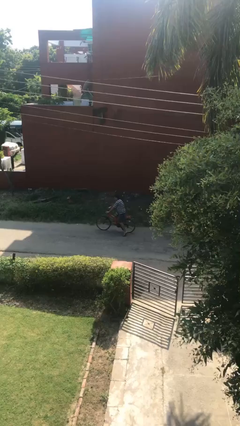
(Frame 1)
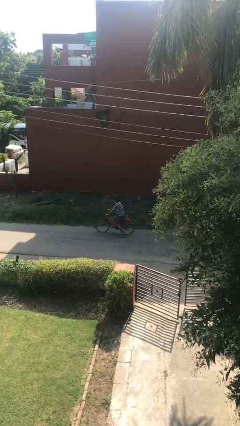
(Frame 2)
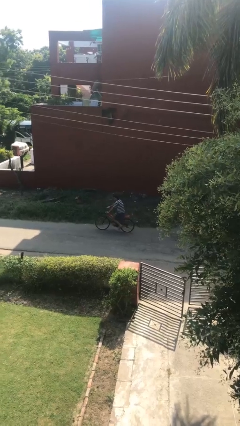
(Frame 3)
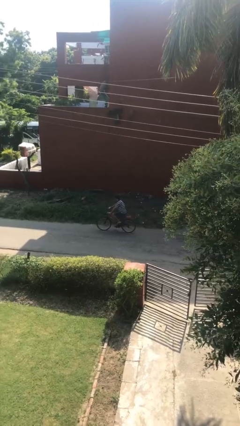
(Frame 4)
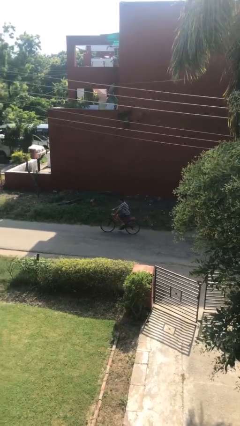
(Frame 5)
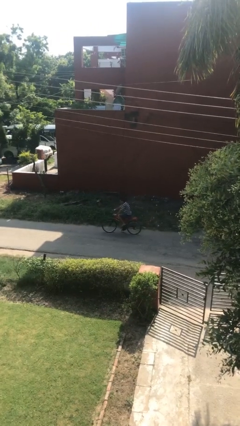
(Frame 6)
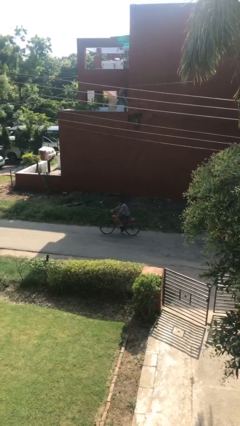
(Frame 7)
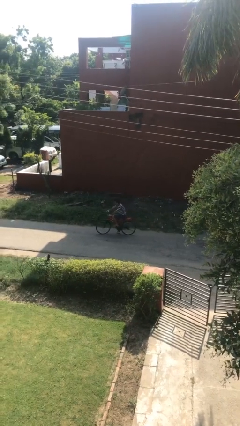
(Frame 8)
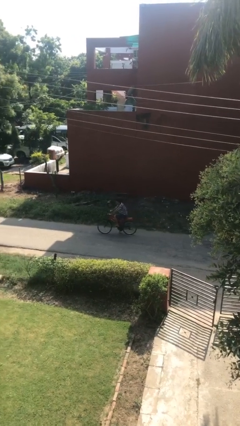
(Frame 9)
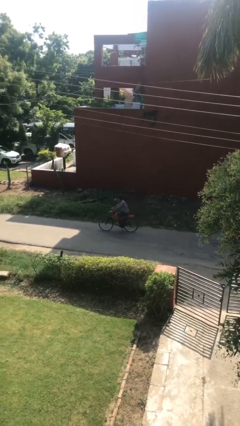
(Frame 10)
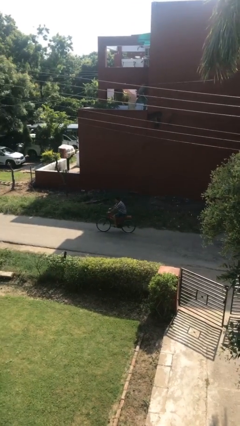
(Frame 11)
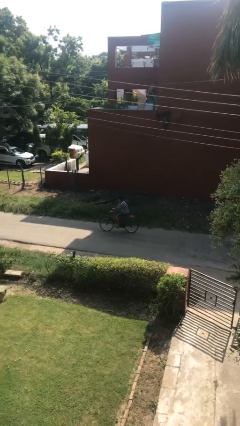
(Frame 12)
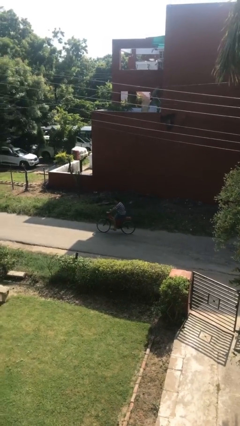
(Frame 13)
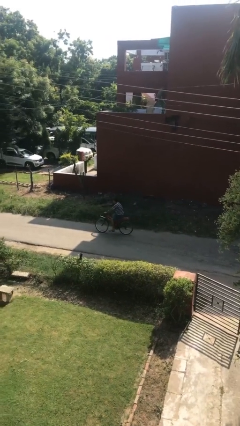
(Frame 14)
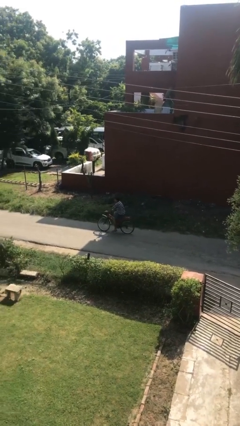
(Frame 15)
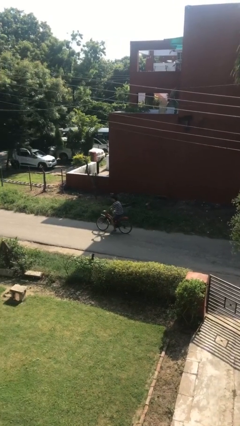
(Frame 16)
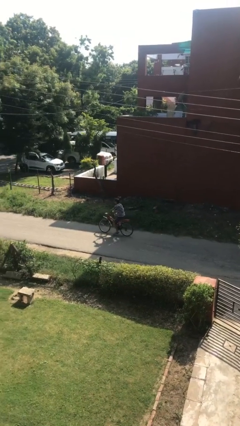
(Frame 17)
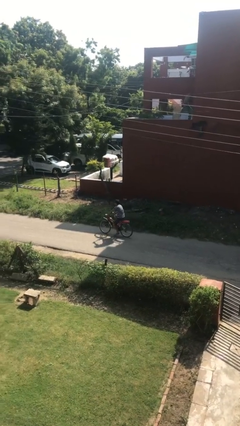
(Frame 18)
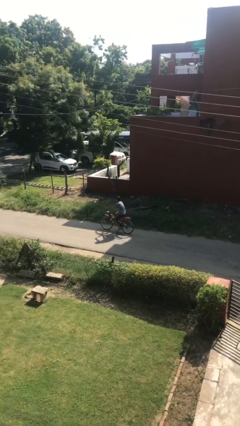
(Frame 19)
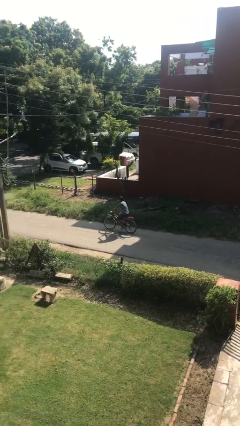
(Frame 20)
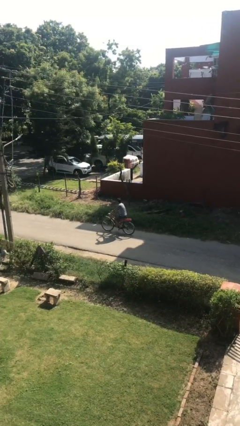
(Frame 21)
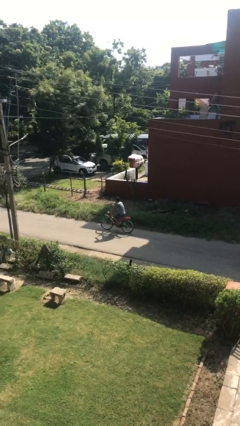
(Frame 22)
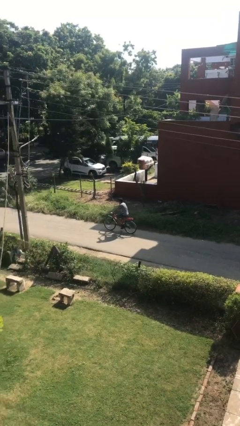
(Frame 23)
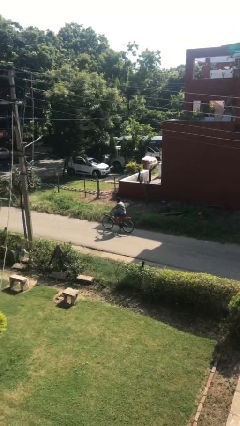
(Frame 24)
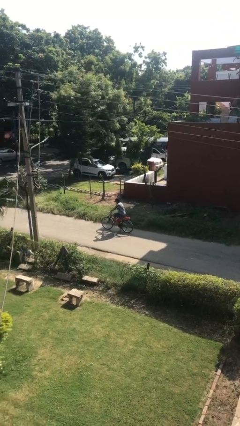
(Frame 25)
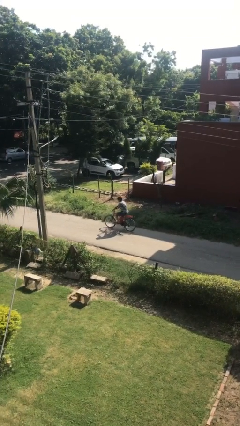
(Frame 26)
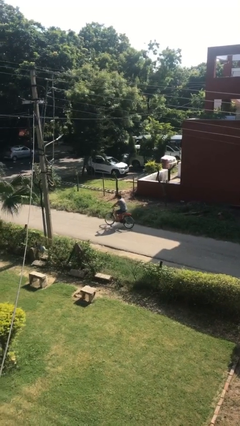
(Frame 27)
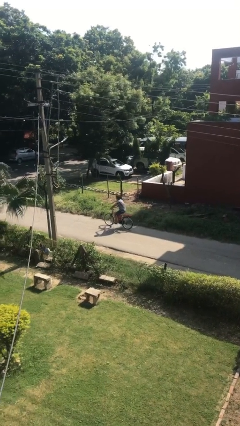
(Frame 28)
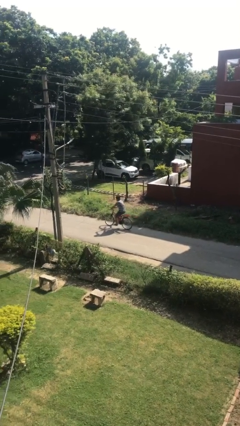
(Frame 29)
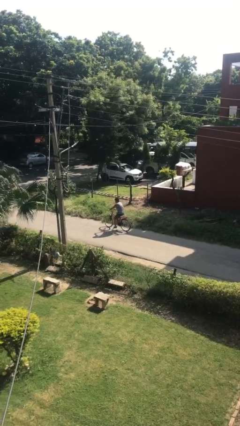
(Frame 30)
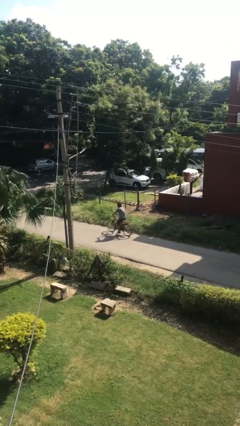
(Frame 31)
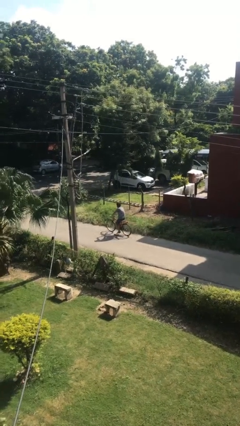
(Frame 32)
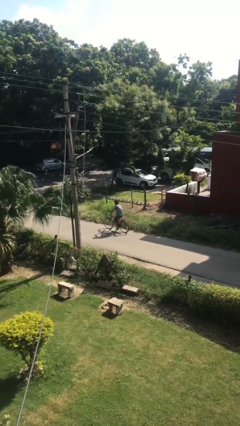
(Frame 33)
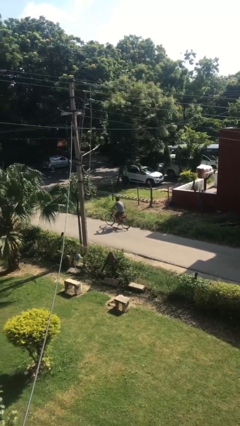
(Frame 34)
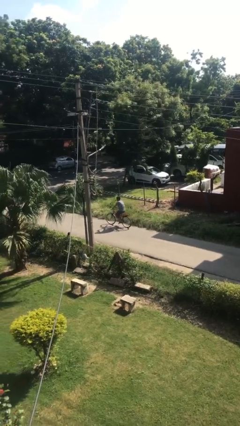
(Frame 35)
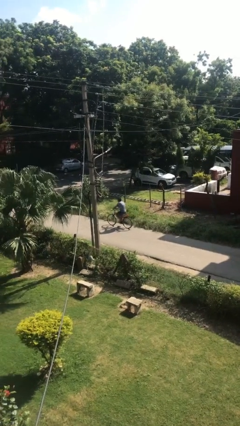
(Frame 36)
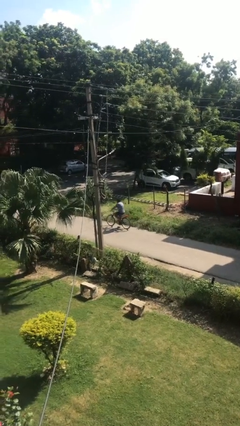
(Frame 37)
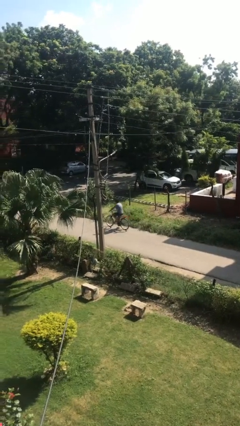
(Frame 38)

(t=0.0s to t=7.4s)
person rides bicycle

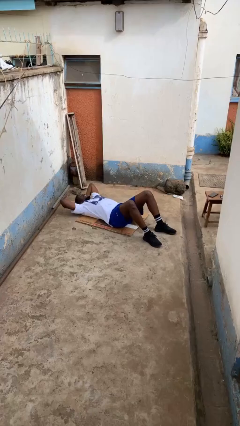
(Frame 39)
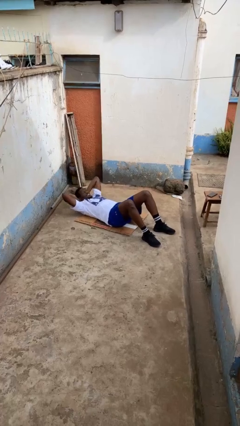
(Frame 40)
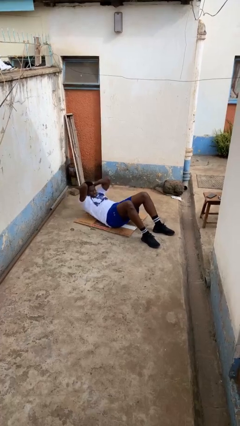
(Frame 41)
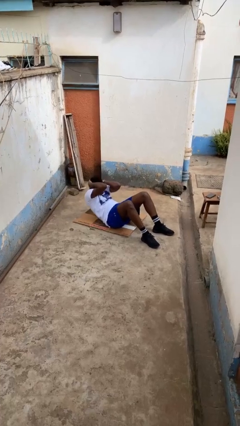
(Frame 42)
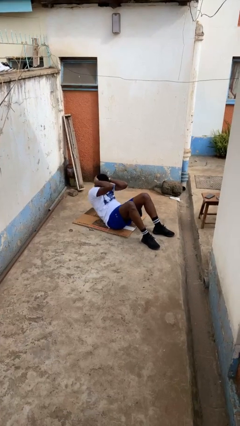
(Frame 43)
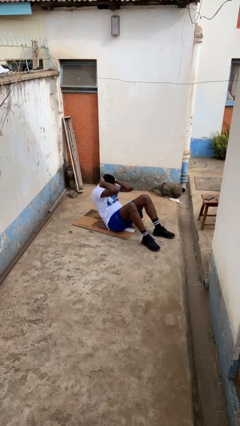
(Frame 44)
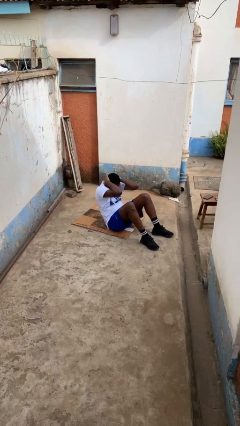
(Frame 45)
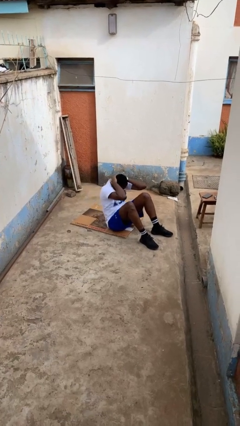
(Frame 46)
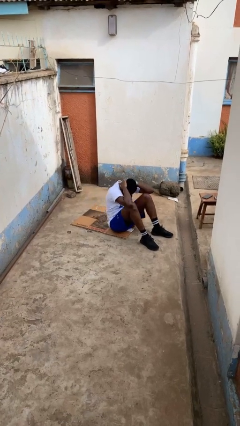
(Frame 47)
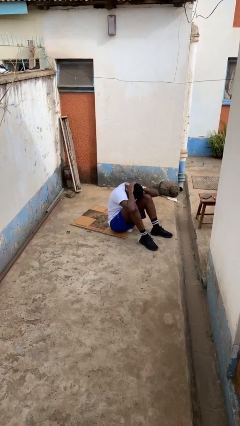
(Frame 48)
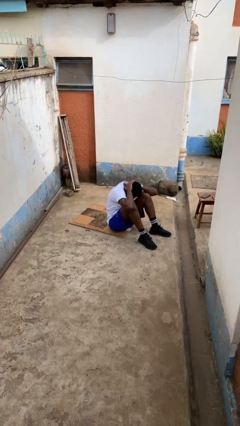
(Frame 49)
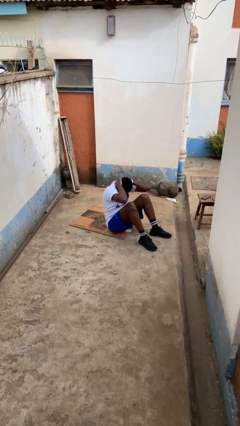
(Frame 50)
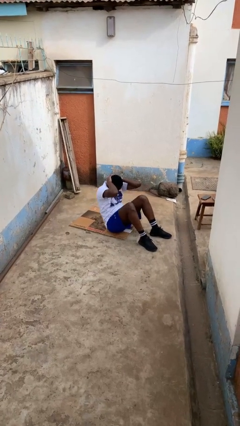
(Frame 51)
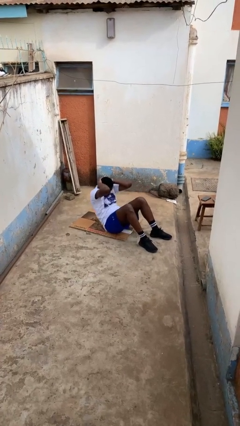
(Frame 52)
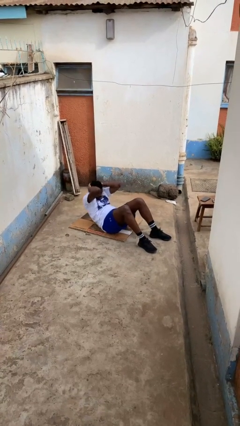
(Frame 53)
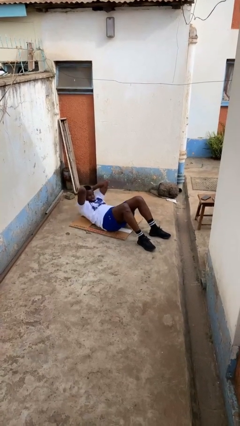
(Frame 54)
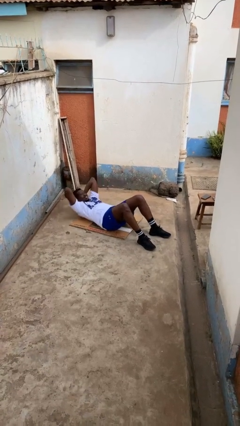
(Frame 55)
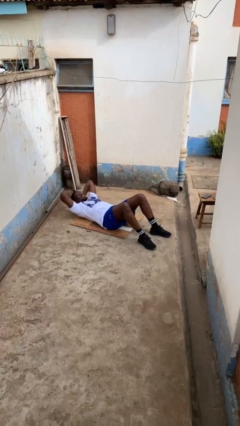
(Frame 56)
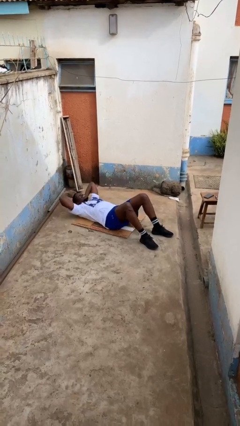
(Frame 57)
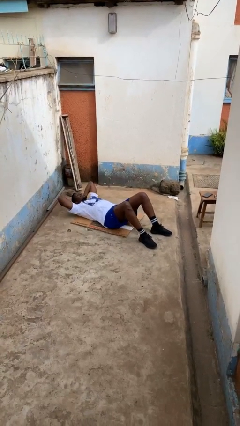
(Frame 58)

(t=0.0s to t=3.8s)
person exercises with situp

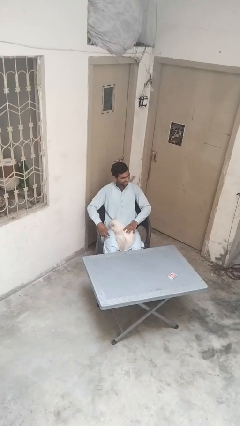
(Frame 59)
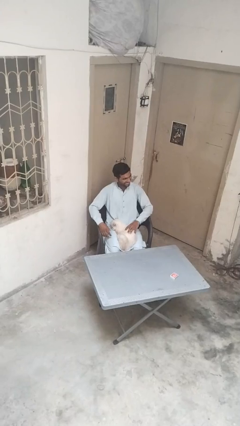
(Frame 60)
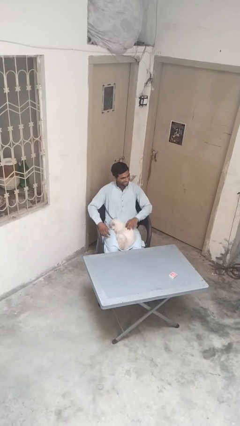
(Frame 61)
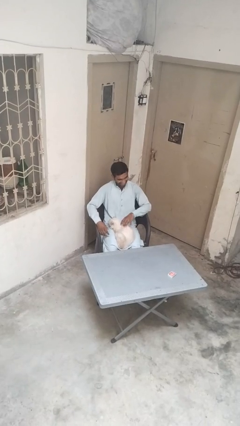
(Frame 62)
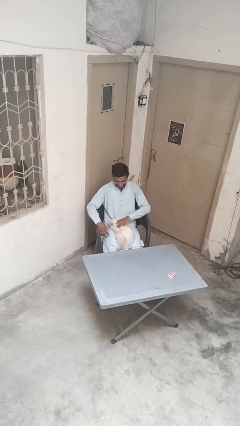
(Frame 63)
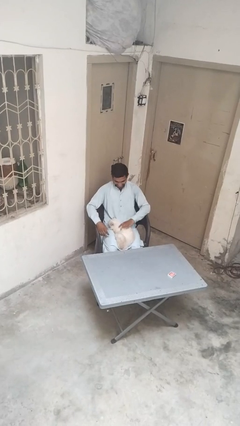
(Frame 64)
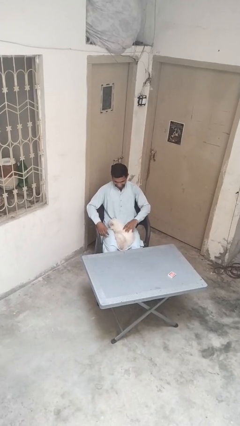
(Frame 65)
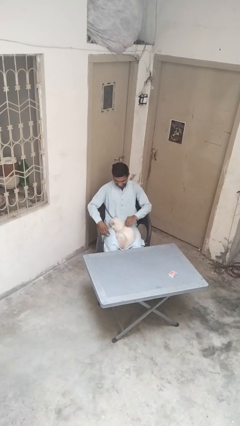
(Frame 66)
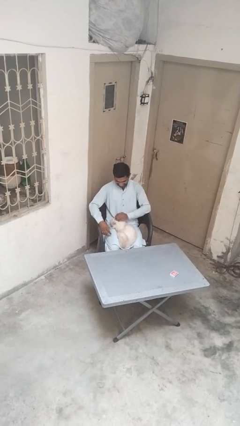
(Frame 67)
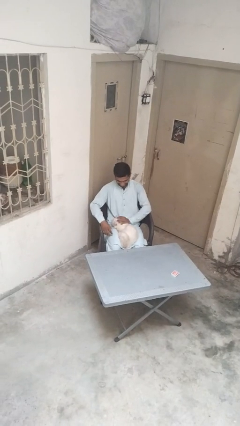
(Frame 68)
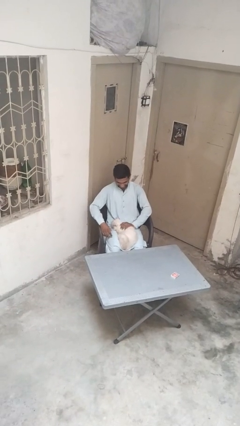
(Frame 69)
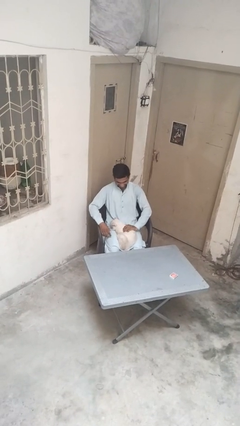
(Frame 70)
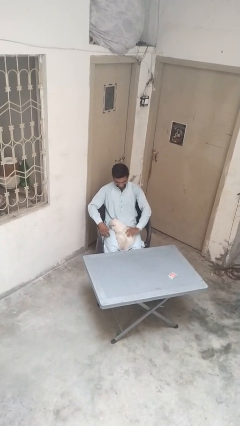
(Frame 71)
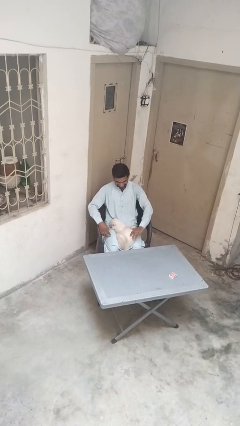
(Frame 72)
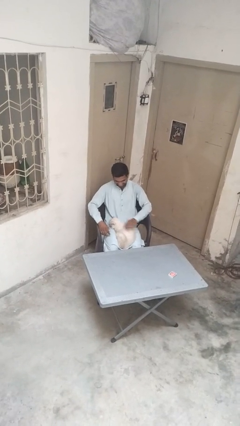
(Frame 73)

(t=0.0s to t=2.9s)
person pets cat

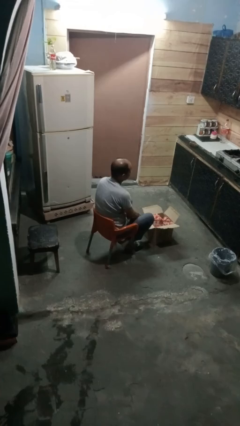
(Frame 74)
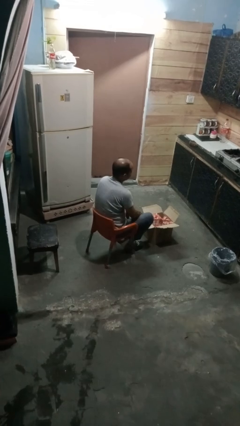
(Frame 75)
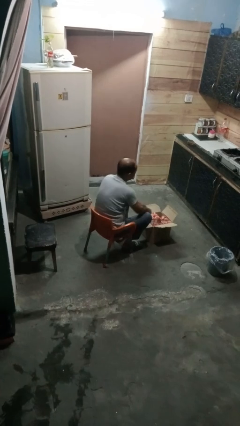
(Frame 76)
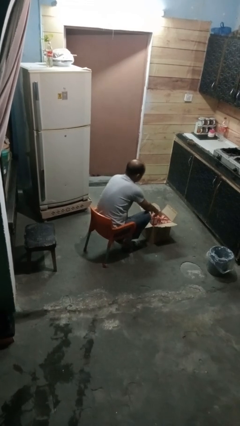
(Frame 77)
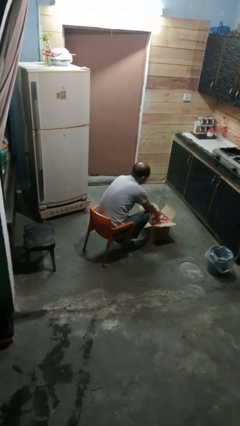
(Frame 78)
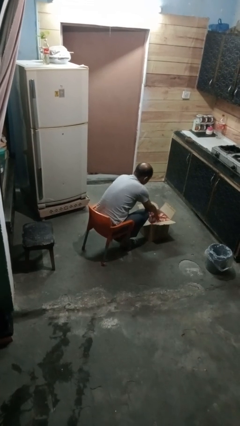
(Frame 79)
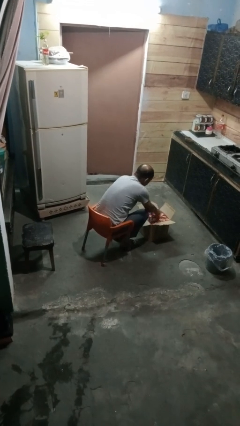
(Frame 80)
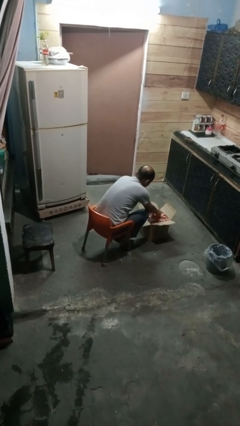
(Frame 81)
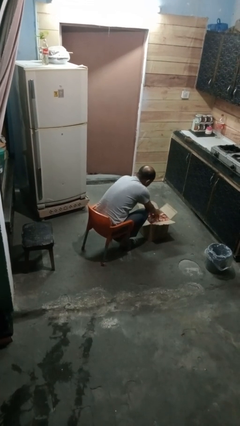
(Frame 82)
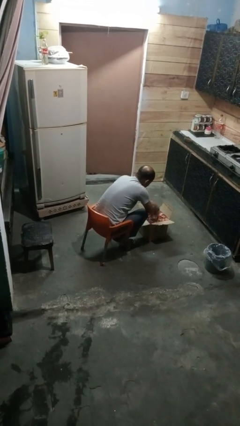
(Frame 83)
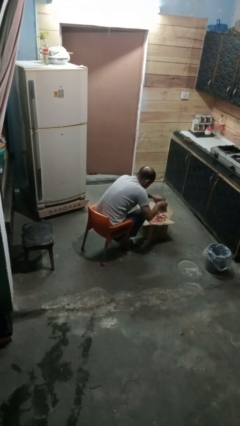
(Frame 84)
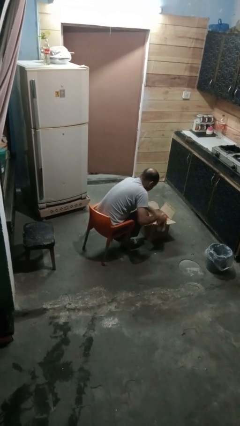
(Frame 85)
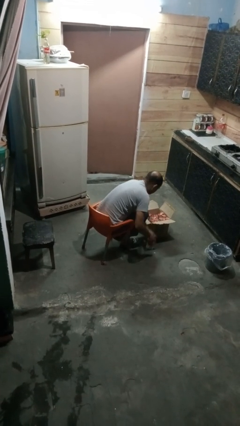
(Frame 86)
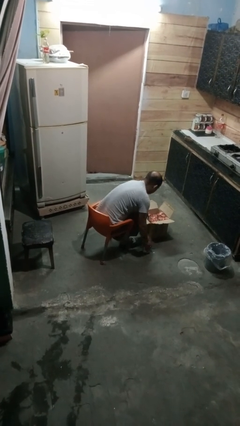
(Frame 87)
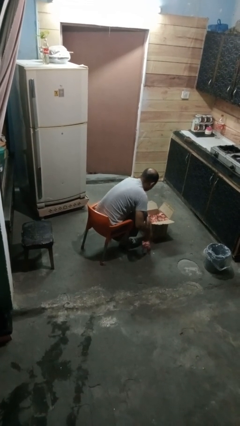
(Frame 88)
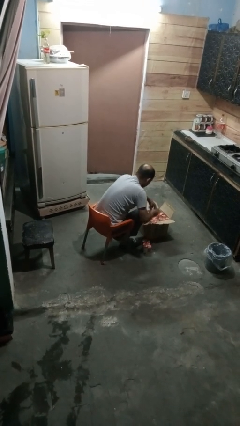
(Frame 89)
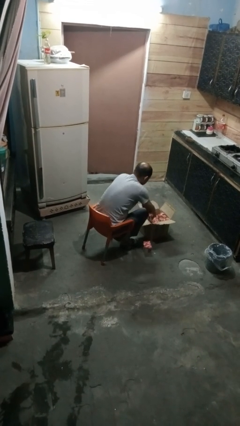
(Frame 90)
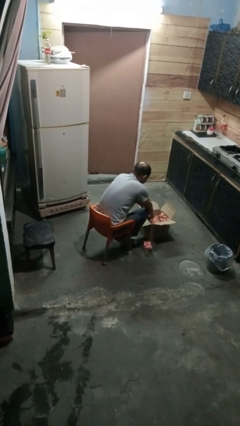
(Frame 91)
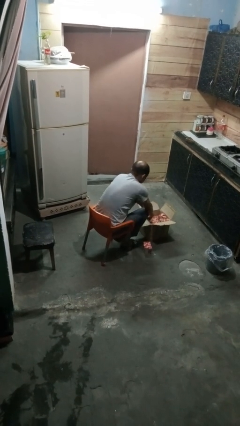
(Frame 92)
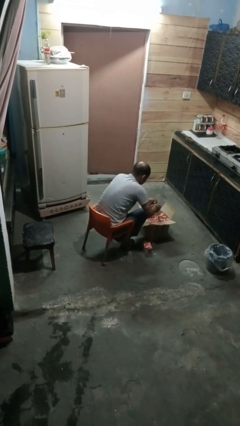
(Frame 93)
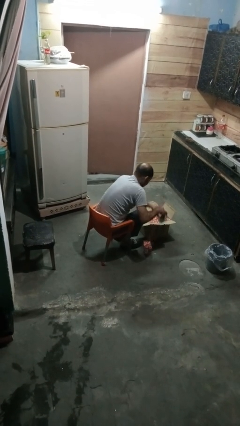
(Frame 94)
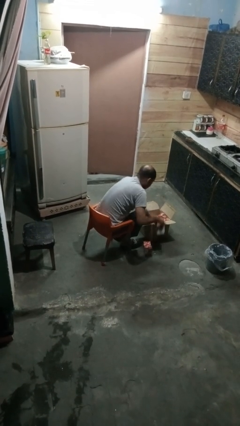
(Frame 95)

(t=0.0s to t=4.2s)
person takes object from box
